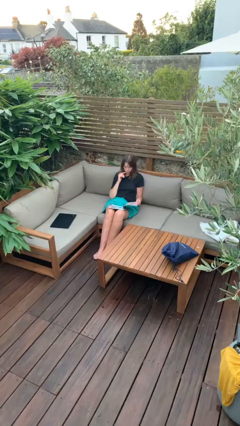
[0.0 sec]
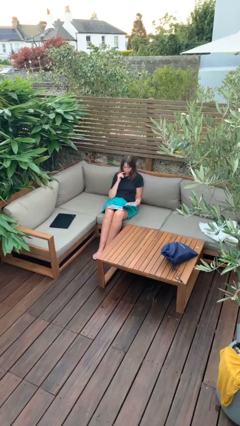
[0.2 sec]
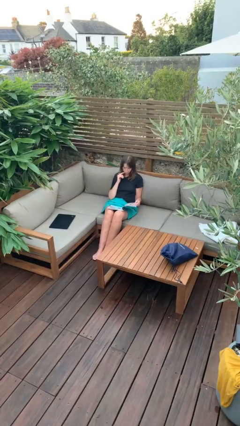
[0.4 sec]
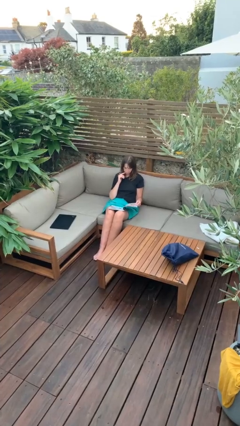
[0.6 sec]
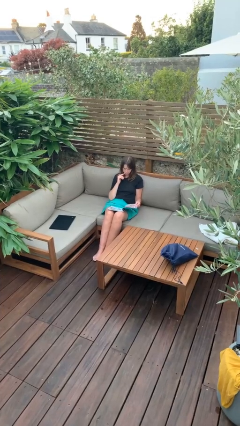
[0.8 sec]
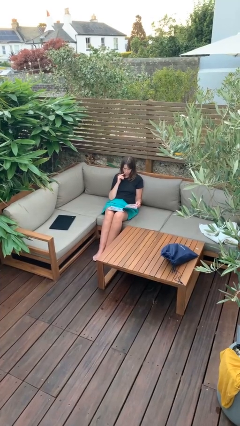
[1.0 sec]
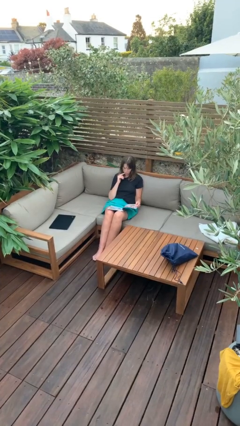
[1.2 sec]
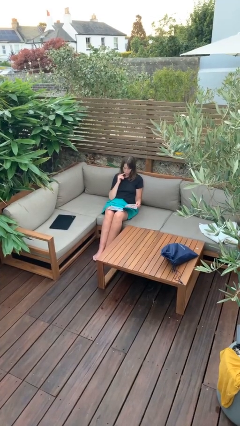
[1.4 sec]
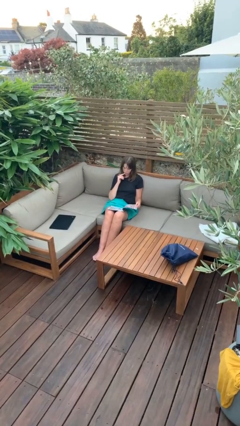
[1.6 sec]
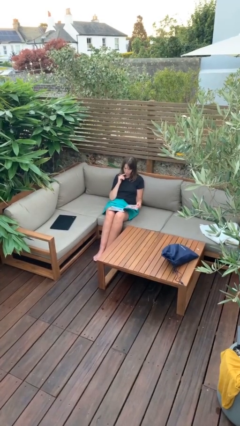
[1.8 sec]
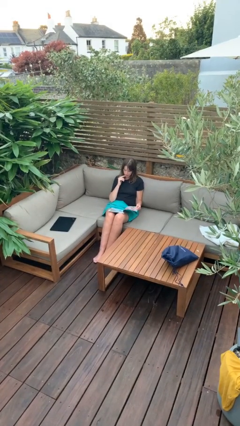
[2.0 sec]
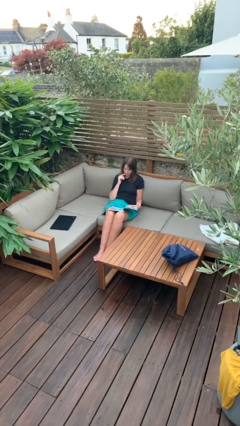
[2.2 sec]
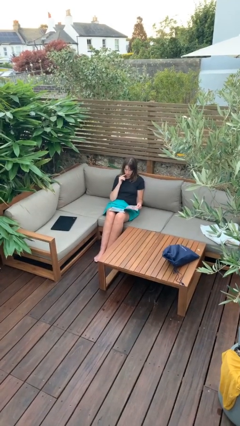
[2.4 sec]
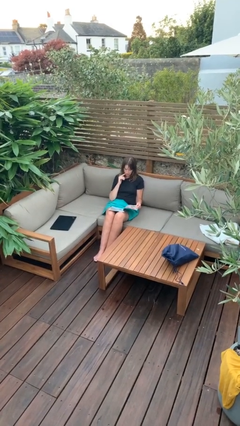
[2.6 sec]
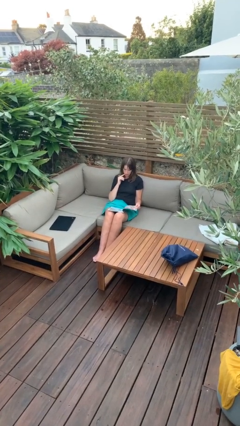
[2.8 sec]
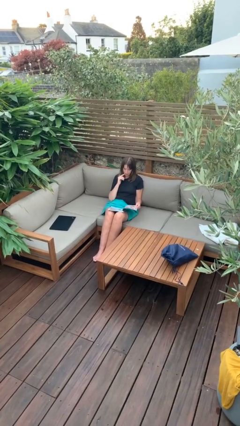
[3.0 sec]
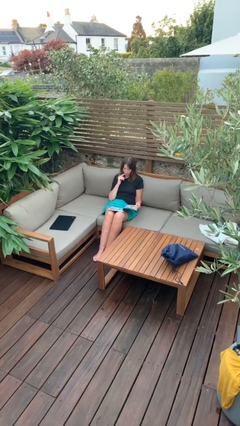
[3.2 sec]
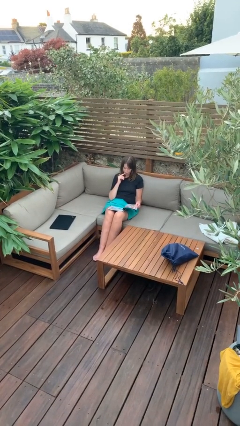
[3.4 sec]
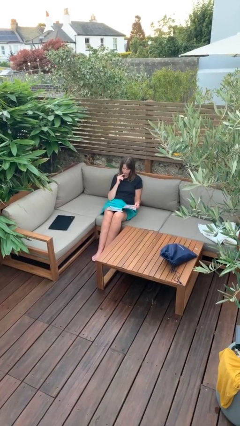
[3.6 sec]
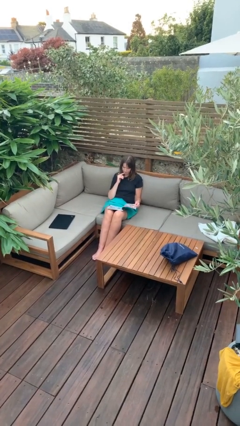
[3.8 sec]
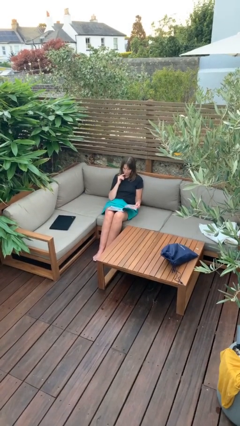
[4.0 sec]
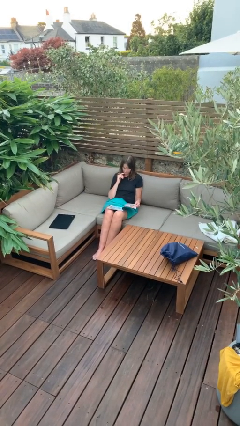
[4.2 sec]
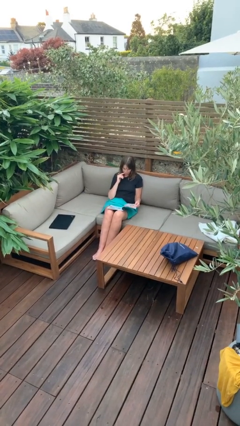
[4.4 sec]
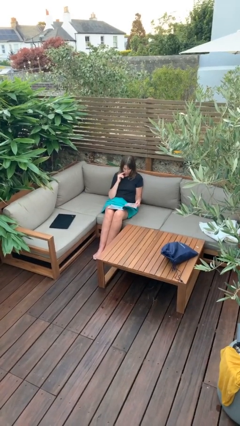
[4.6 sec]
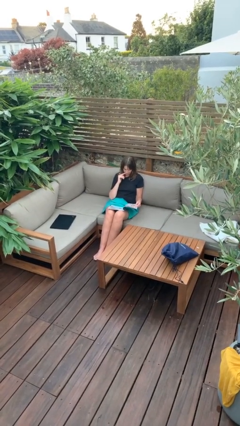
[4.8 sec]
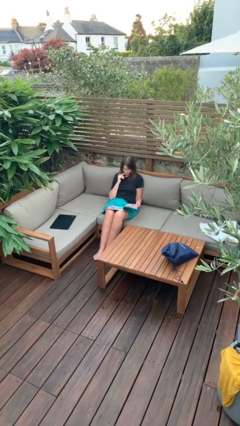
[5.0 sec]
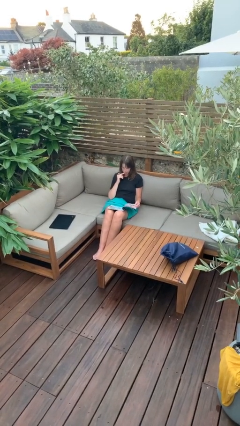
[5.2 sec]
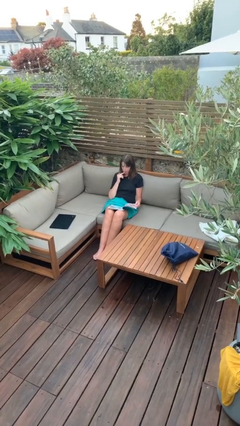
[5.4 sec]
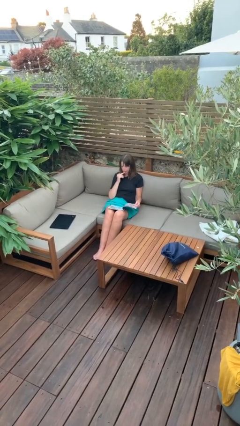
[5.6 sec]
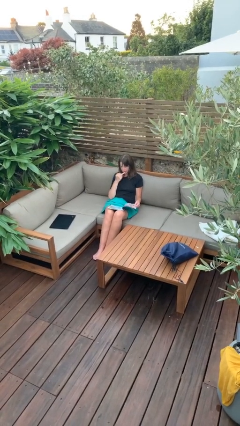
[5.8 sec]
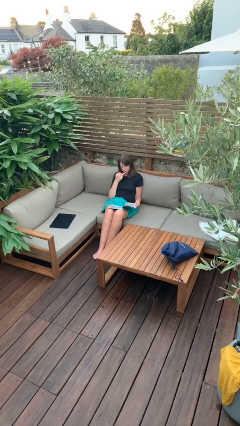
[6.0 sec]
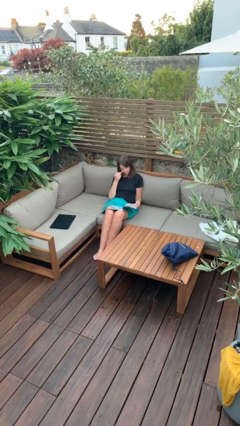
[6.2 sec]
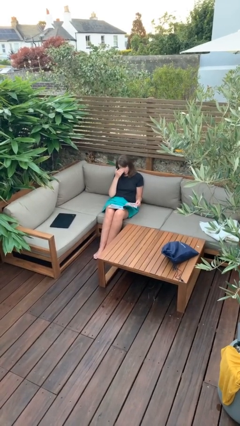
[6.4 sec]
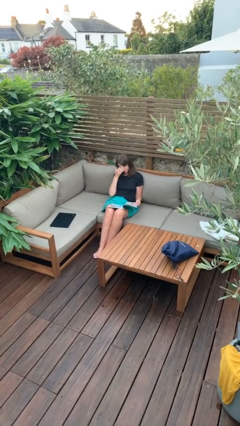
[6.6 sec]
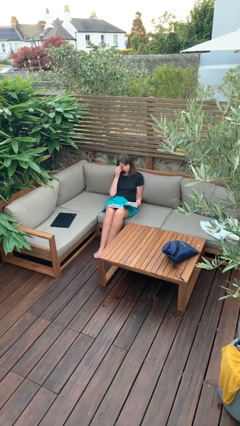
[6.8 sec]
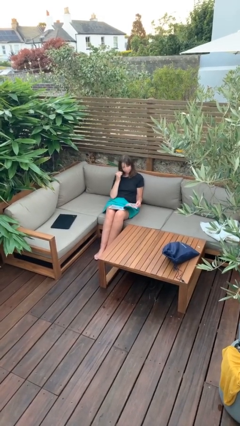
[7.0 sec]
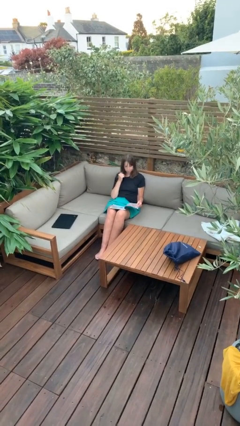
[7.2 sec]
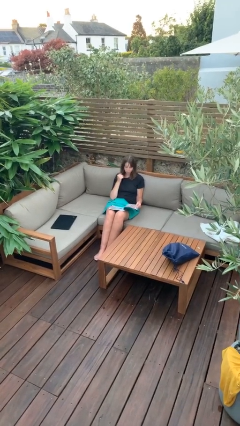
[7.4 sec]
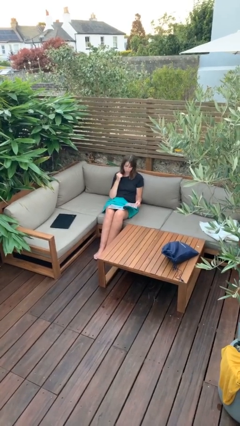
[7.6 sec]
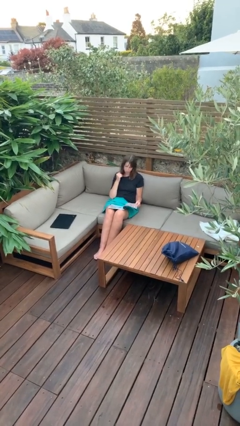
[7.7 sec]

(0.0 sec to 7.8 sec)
person reads document

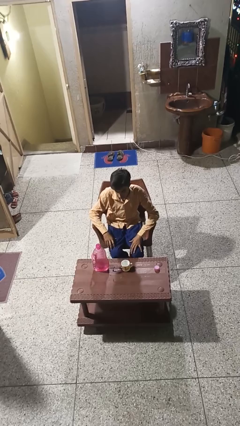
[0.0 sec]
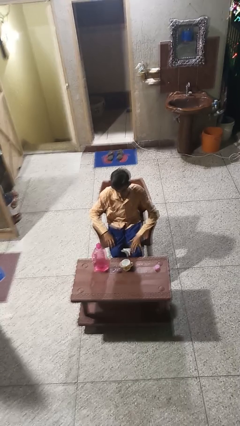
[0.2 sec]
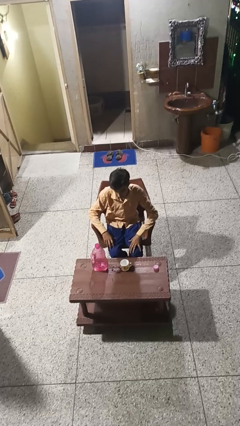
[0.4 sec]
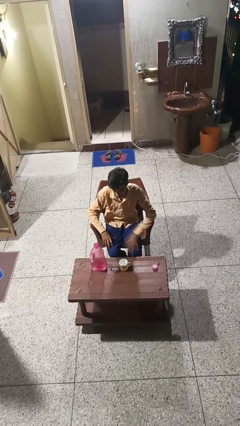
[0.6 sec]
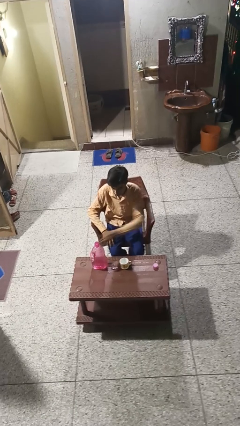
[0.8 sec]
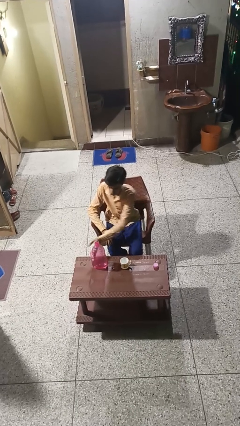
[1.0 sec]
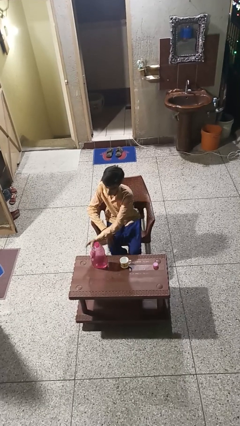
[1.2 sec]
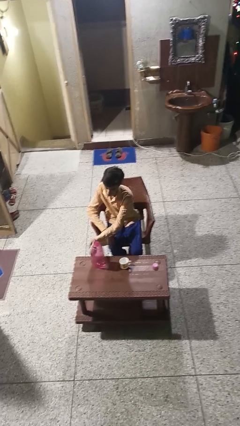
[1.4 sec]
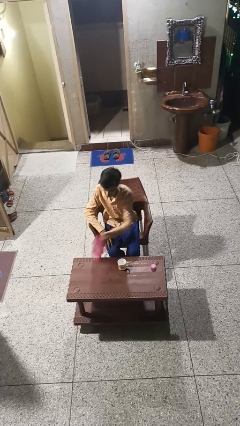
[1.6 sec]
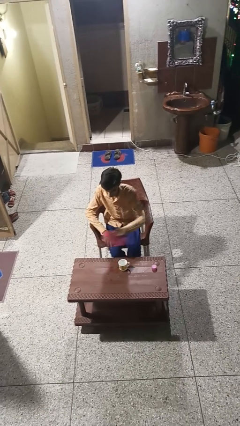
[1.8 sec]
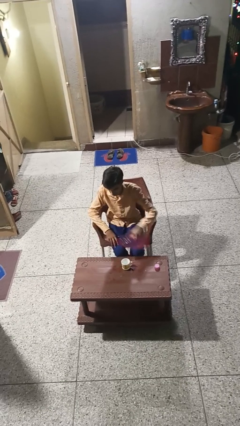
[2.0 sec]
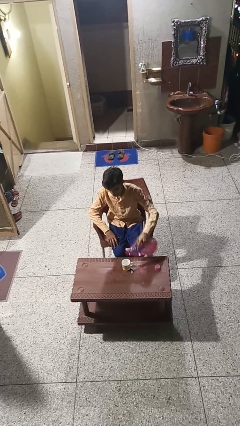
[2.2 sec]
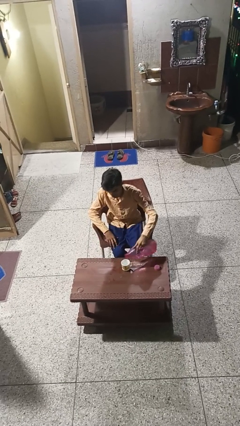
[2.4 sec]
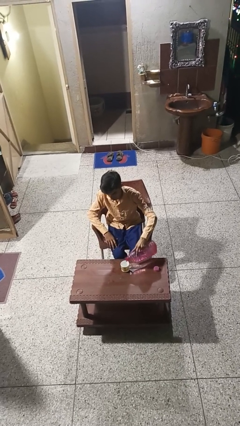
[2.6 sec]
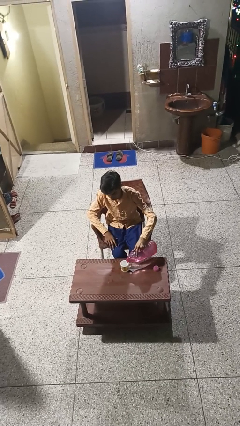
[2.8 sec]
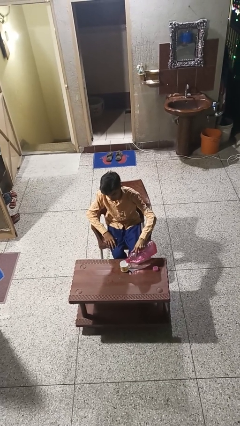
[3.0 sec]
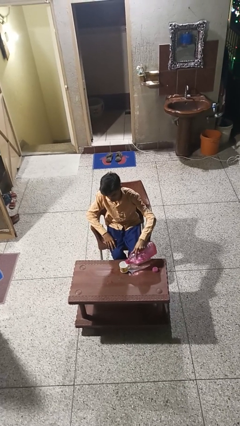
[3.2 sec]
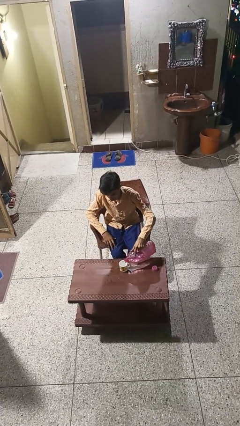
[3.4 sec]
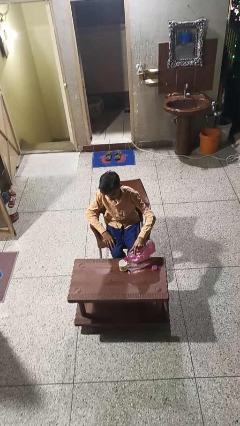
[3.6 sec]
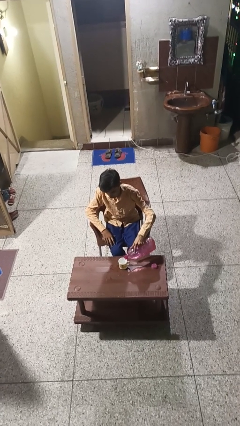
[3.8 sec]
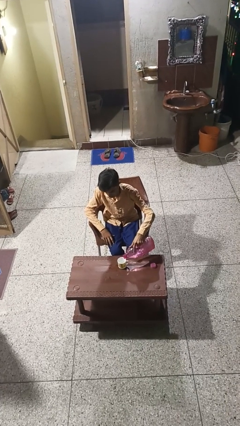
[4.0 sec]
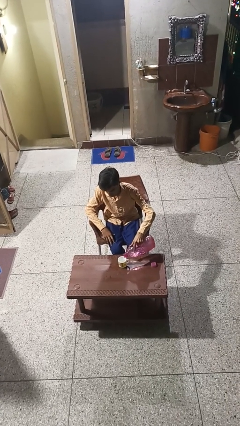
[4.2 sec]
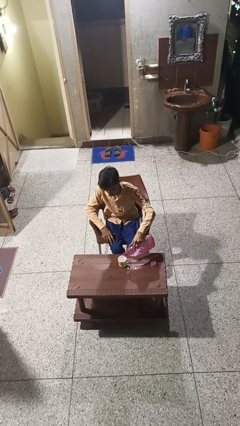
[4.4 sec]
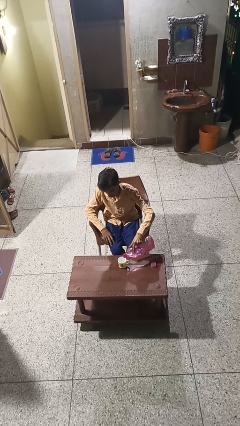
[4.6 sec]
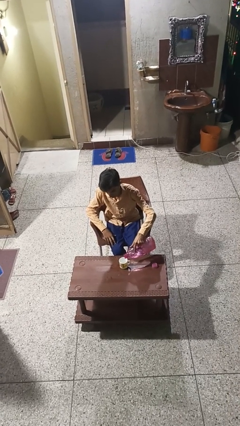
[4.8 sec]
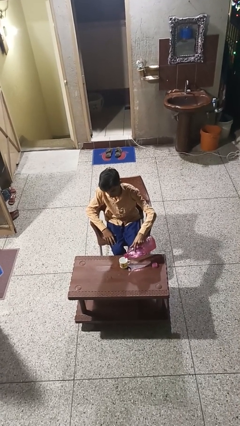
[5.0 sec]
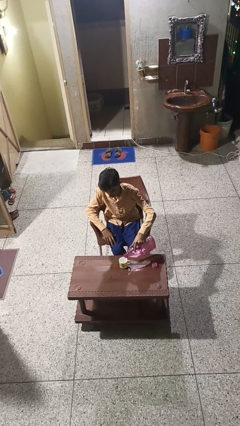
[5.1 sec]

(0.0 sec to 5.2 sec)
person pours liquid into cup

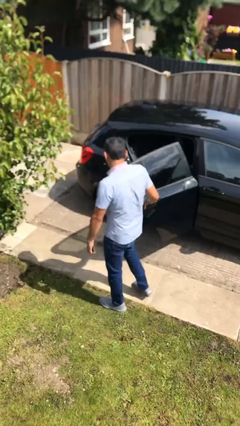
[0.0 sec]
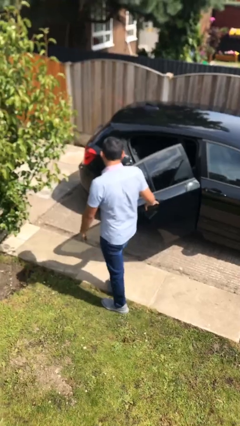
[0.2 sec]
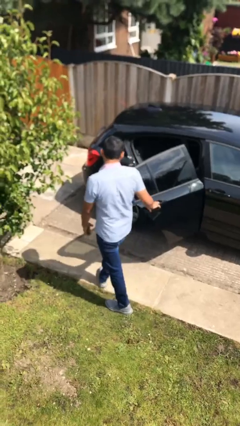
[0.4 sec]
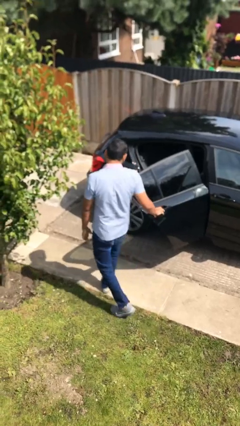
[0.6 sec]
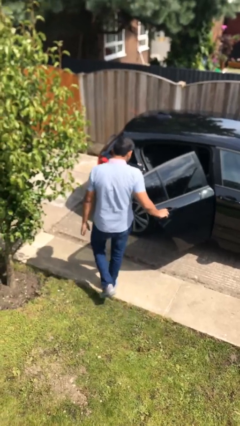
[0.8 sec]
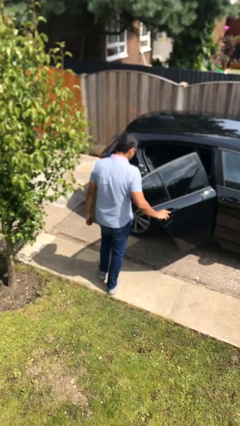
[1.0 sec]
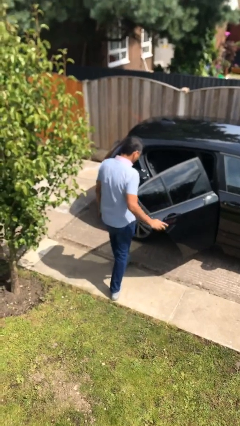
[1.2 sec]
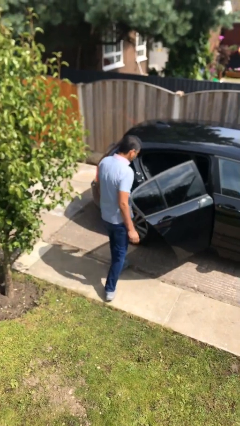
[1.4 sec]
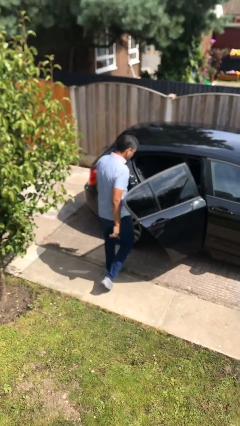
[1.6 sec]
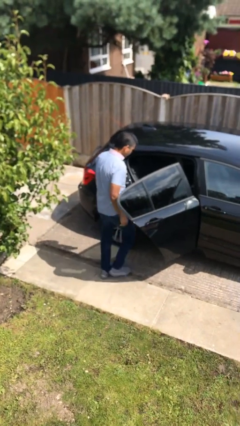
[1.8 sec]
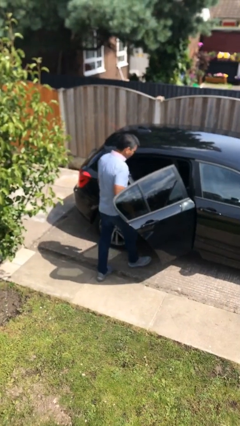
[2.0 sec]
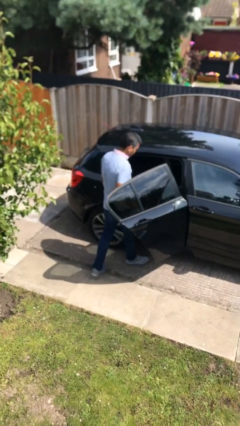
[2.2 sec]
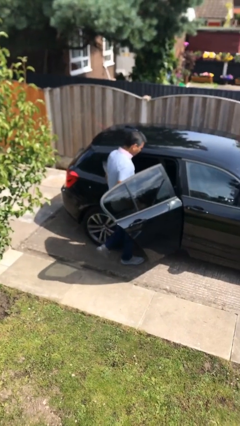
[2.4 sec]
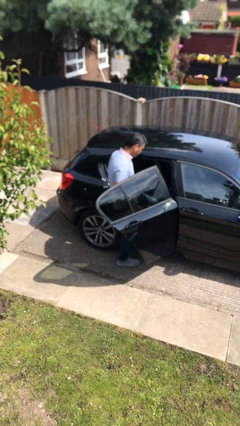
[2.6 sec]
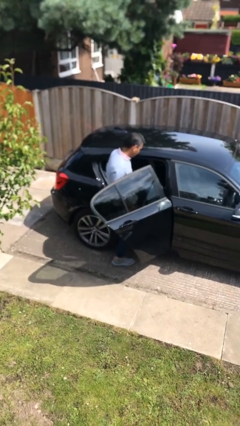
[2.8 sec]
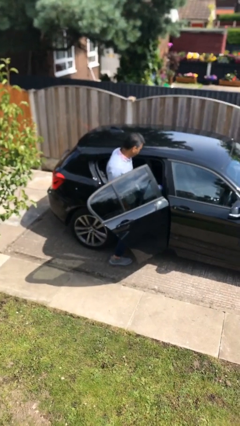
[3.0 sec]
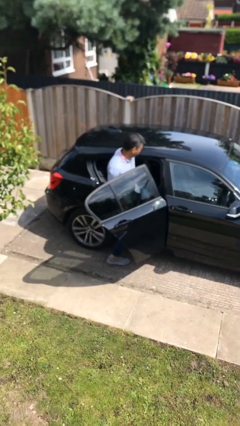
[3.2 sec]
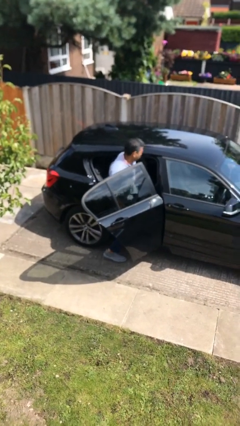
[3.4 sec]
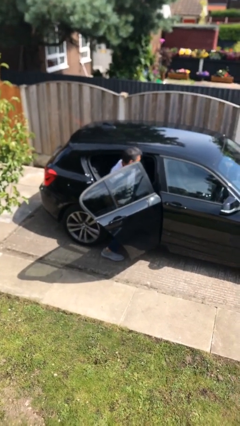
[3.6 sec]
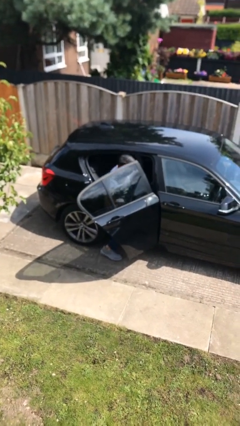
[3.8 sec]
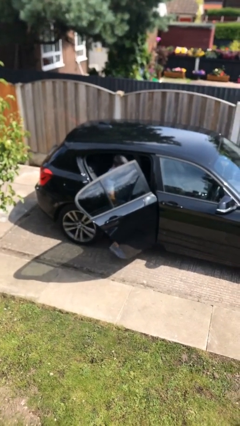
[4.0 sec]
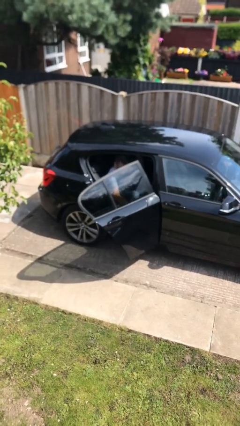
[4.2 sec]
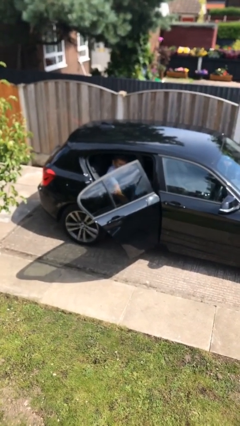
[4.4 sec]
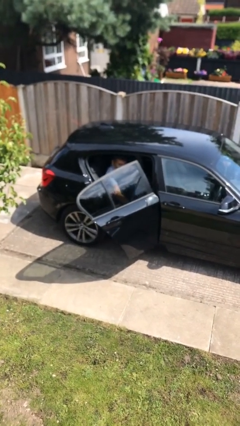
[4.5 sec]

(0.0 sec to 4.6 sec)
person enters car
